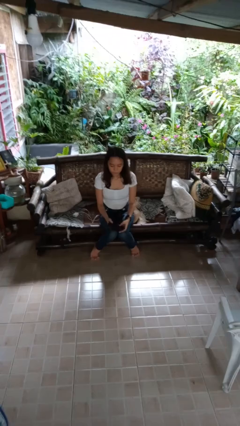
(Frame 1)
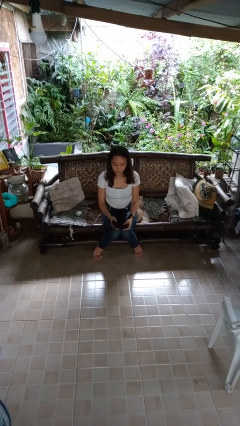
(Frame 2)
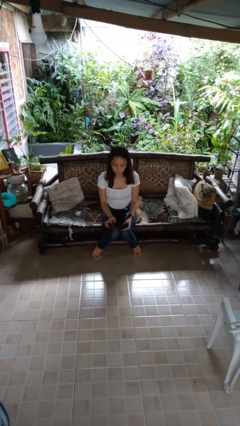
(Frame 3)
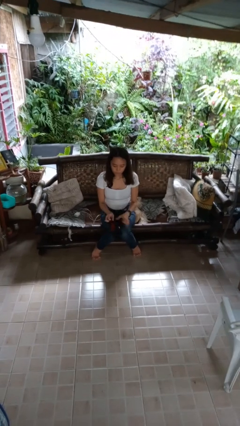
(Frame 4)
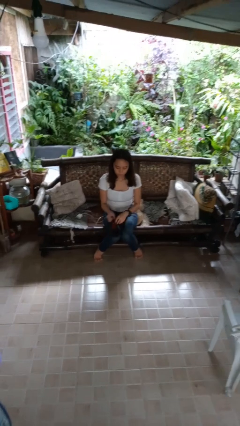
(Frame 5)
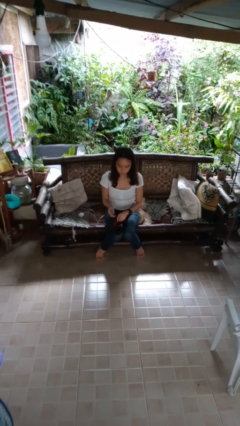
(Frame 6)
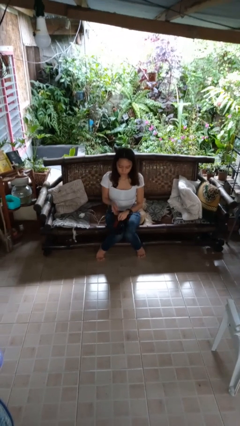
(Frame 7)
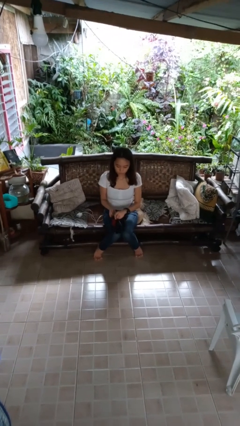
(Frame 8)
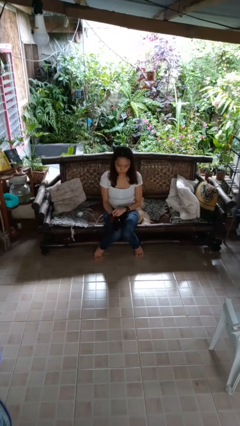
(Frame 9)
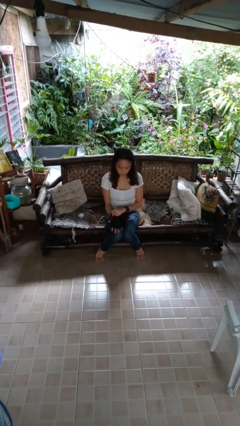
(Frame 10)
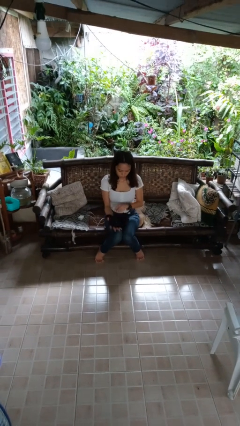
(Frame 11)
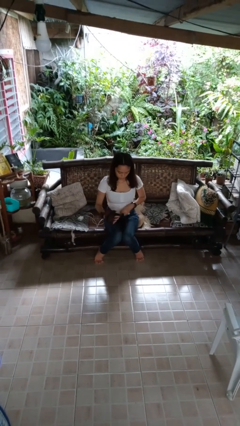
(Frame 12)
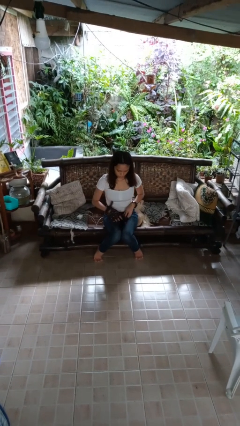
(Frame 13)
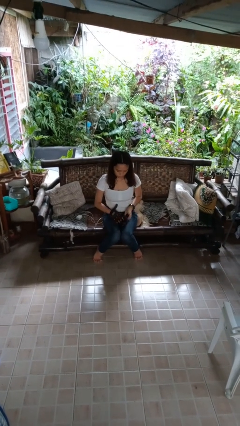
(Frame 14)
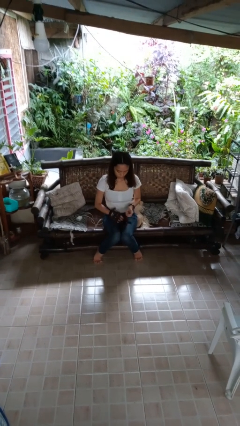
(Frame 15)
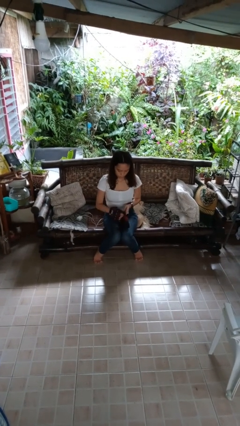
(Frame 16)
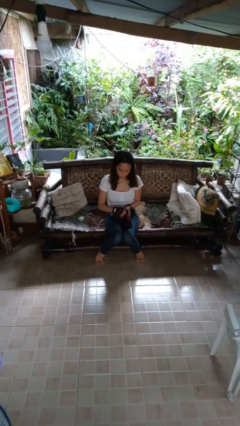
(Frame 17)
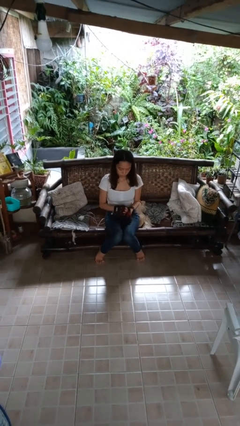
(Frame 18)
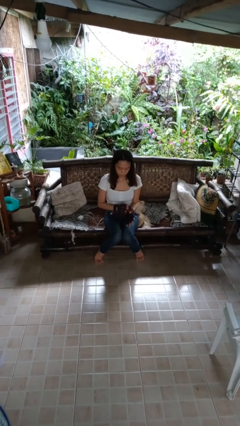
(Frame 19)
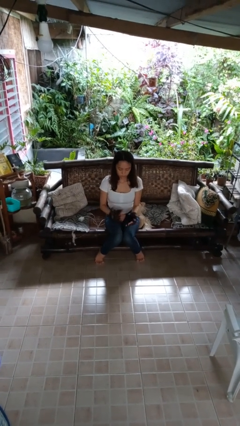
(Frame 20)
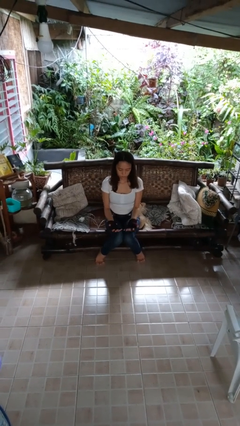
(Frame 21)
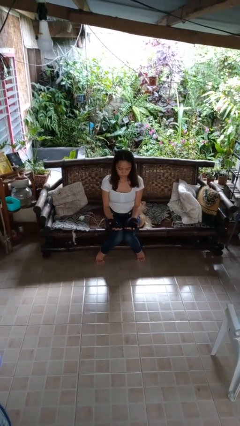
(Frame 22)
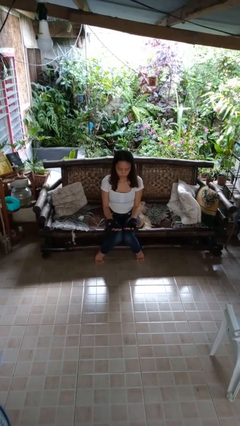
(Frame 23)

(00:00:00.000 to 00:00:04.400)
person puts on gloves

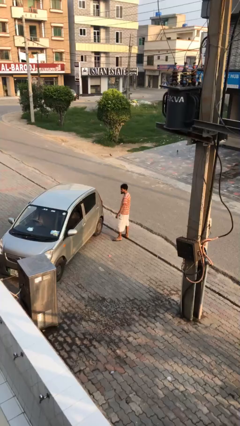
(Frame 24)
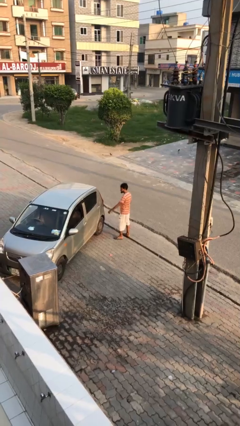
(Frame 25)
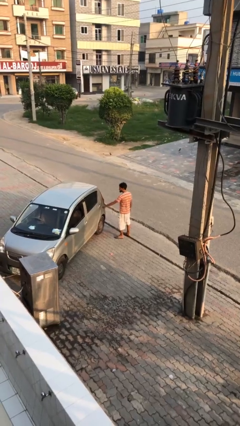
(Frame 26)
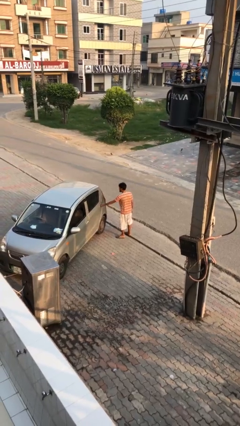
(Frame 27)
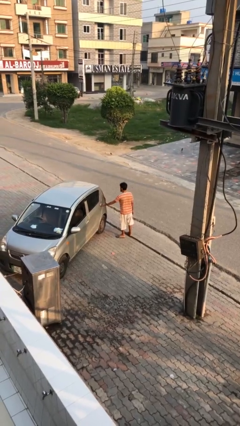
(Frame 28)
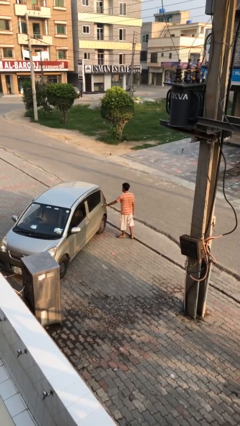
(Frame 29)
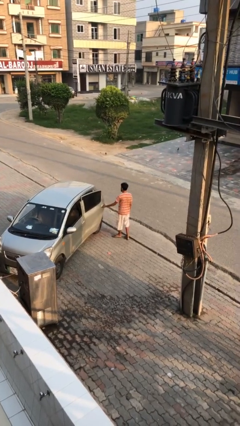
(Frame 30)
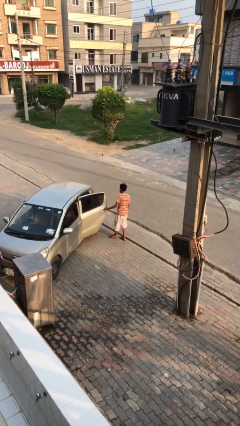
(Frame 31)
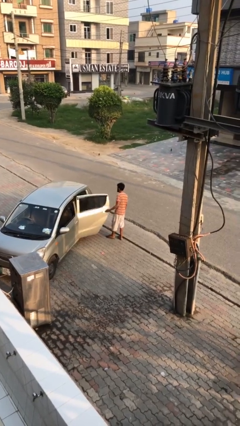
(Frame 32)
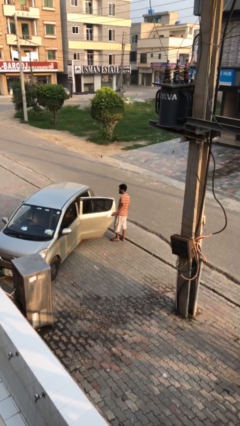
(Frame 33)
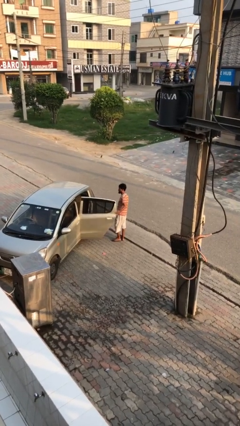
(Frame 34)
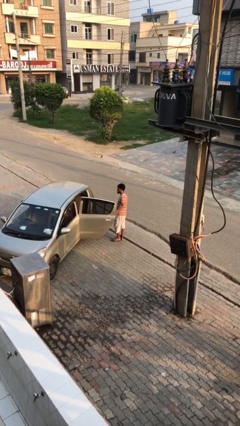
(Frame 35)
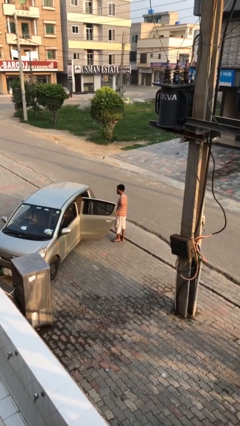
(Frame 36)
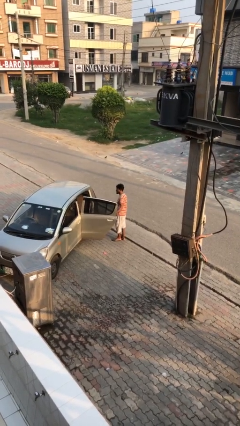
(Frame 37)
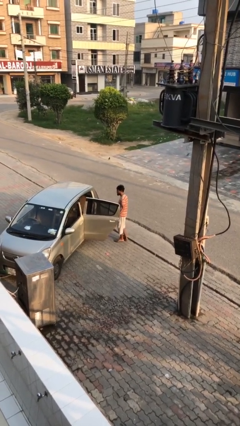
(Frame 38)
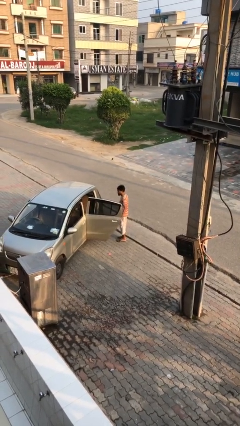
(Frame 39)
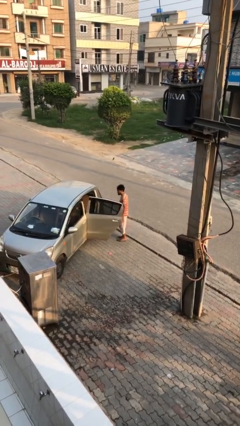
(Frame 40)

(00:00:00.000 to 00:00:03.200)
person opens car door

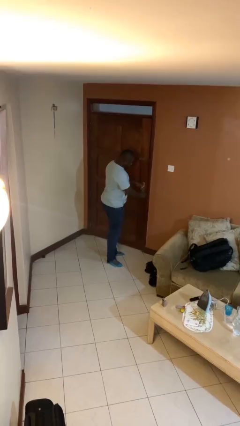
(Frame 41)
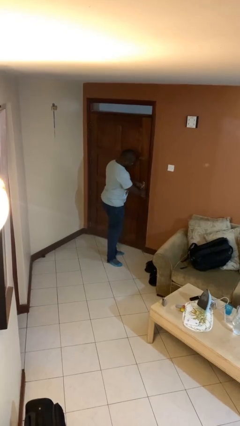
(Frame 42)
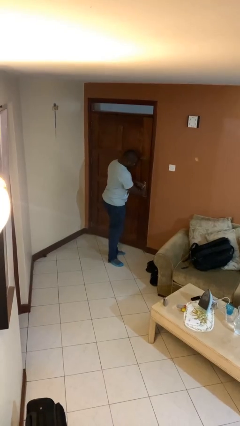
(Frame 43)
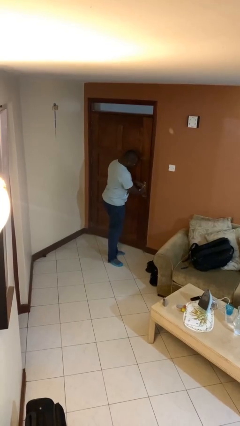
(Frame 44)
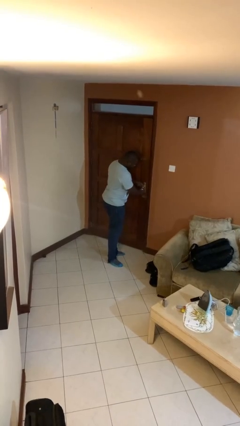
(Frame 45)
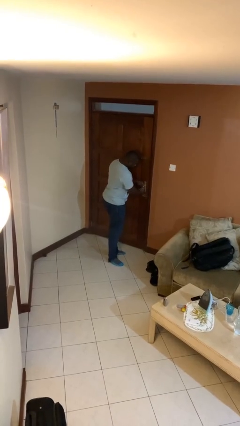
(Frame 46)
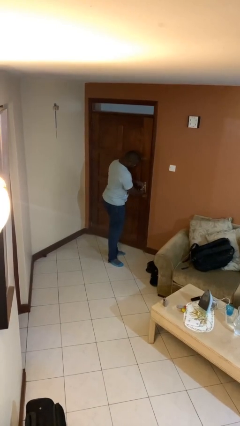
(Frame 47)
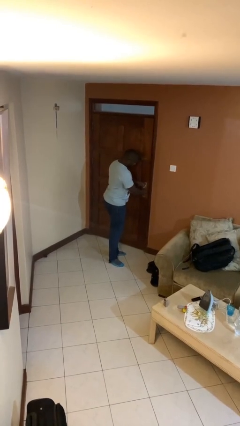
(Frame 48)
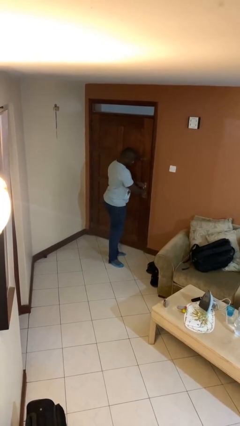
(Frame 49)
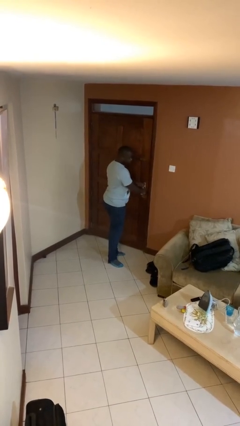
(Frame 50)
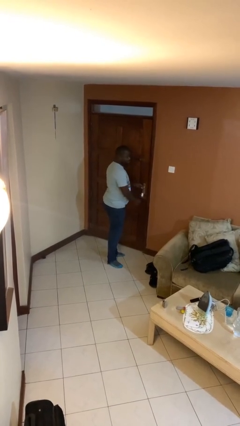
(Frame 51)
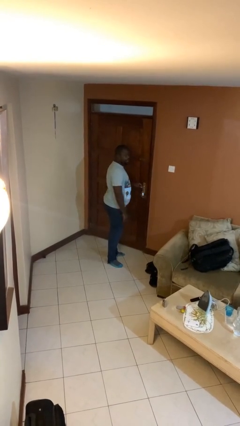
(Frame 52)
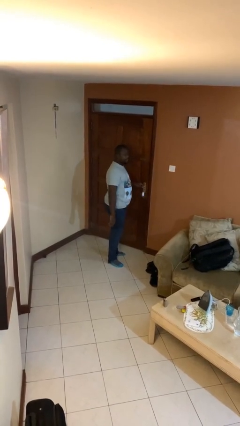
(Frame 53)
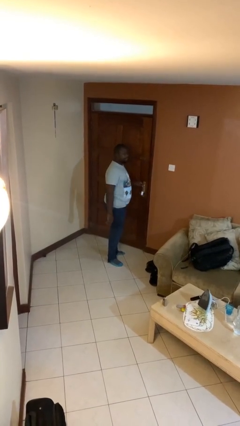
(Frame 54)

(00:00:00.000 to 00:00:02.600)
person locks door with keys

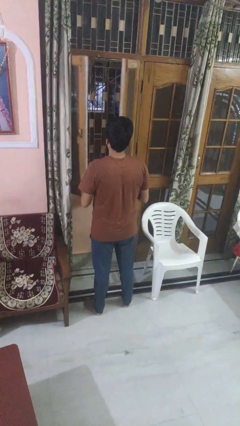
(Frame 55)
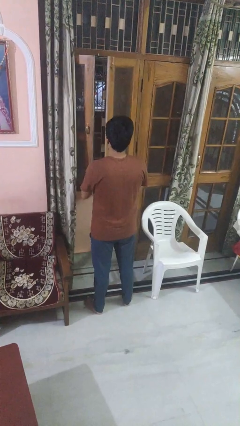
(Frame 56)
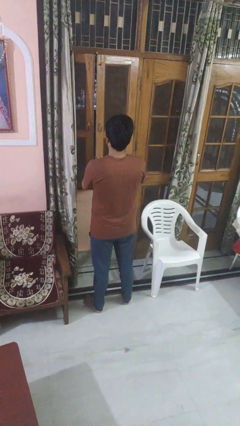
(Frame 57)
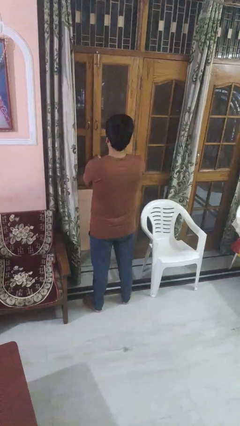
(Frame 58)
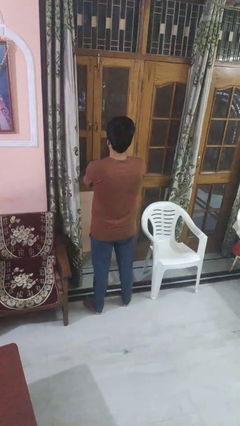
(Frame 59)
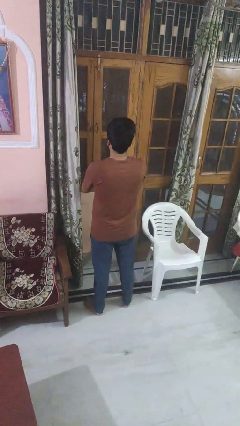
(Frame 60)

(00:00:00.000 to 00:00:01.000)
person closes home window

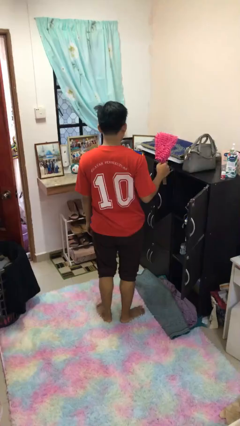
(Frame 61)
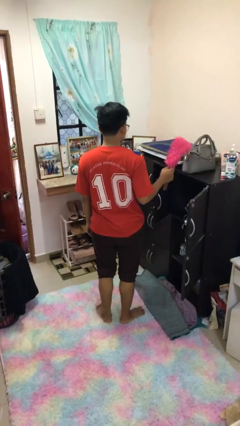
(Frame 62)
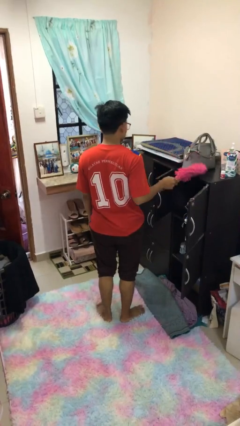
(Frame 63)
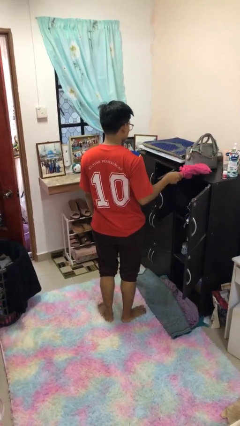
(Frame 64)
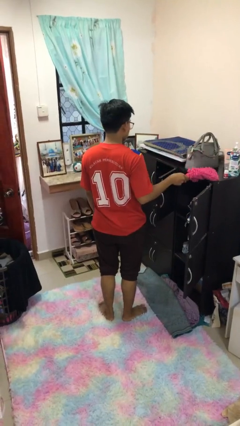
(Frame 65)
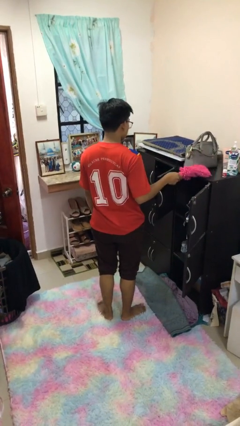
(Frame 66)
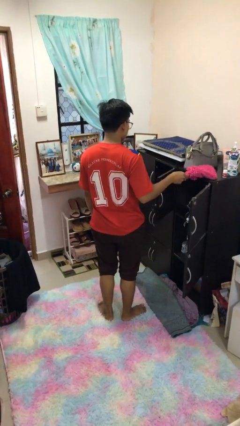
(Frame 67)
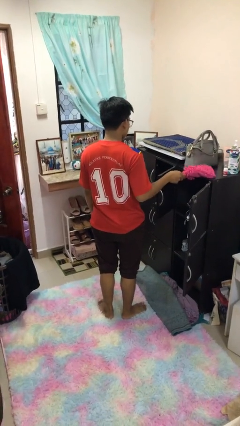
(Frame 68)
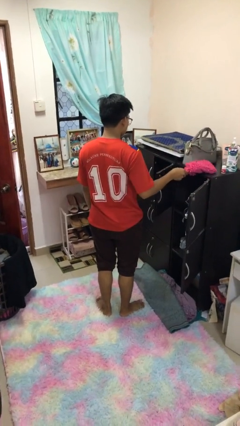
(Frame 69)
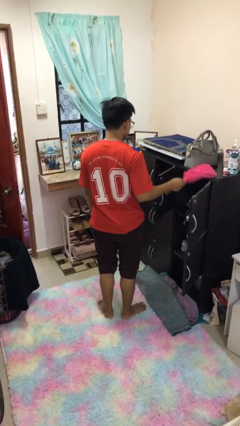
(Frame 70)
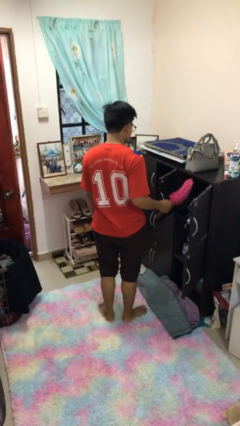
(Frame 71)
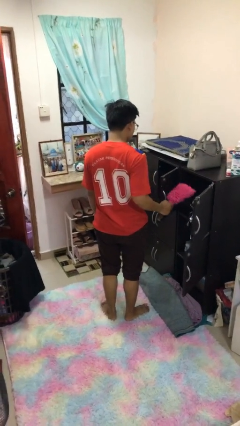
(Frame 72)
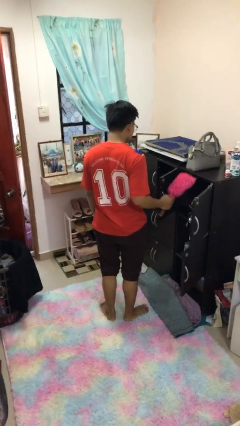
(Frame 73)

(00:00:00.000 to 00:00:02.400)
person dusts furniture

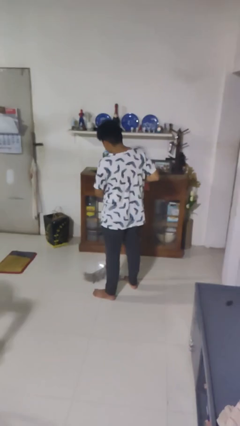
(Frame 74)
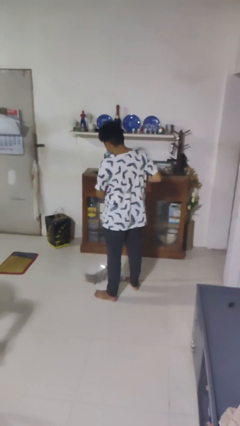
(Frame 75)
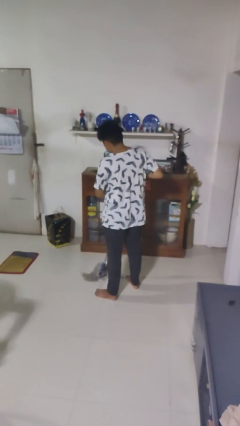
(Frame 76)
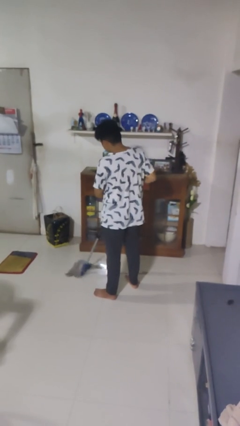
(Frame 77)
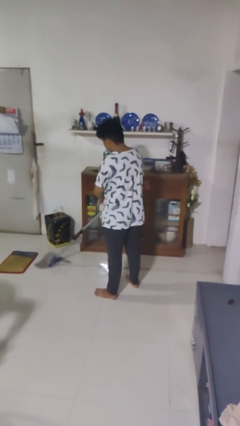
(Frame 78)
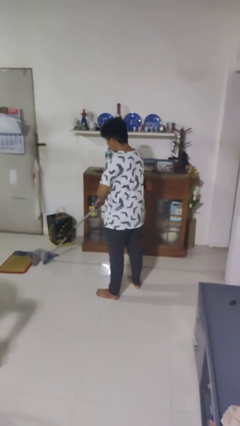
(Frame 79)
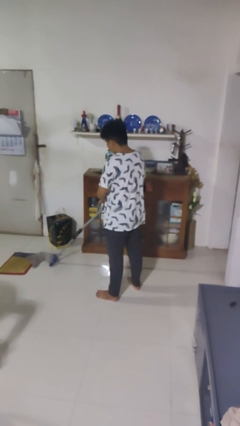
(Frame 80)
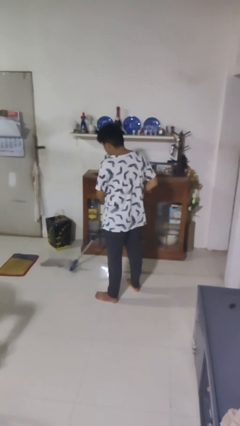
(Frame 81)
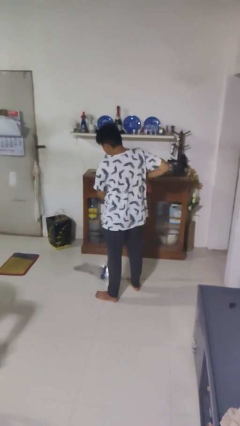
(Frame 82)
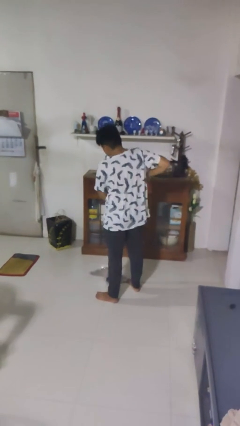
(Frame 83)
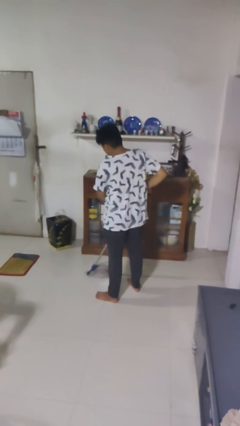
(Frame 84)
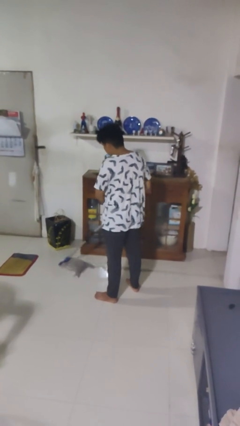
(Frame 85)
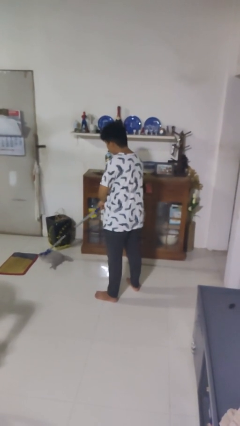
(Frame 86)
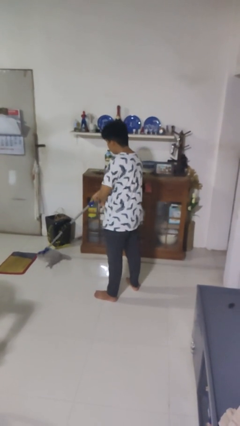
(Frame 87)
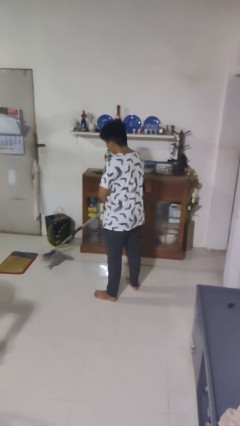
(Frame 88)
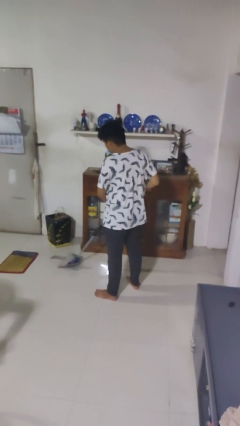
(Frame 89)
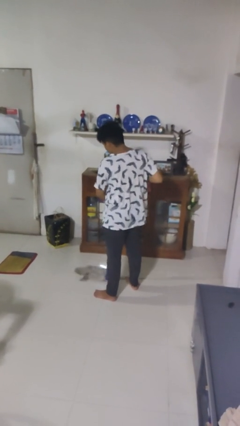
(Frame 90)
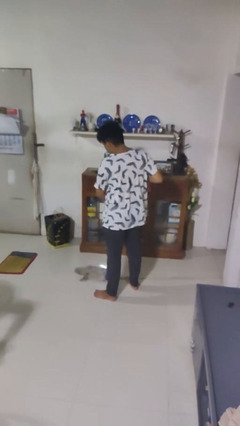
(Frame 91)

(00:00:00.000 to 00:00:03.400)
person mops

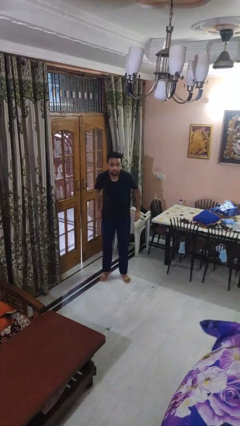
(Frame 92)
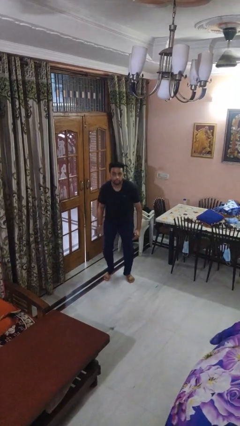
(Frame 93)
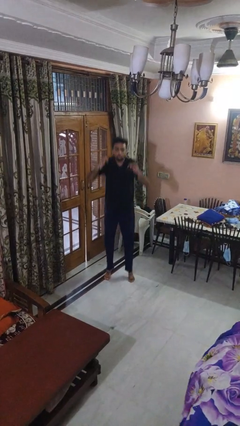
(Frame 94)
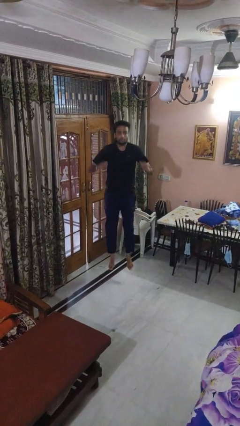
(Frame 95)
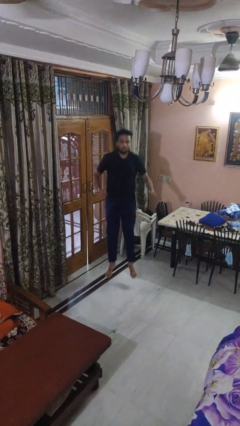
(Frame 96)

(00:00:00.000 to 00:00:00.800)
person jumps
